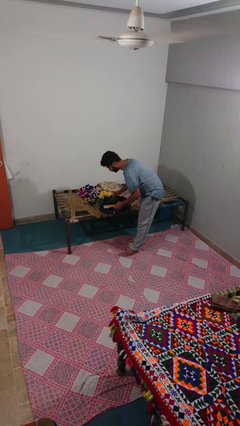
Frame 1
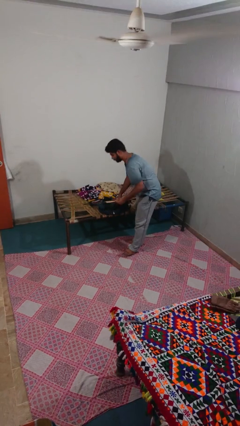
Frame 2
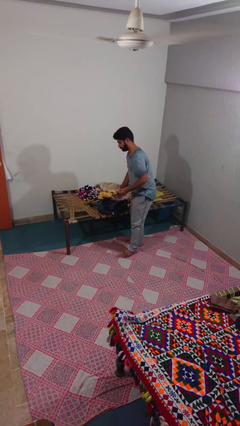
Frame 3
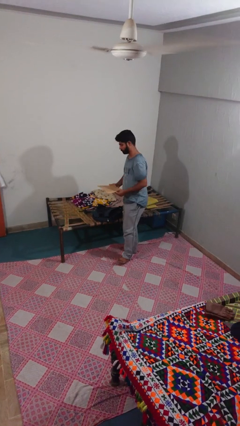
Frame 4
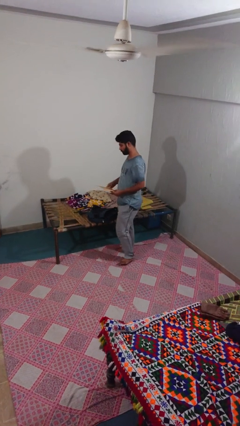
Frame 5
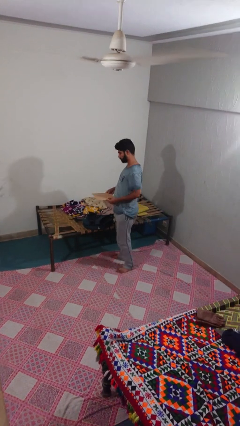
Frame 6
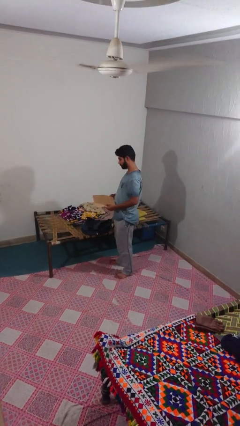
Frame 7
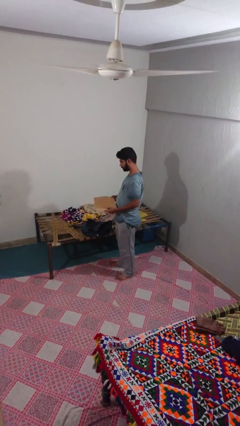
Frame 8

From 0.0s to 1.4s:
person takes object from backpack

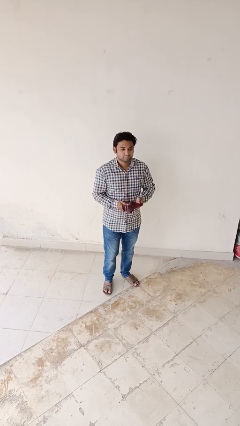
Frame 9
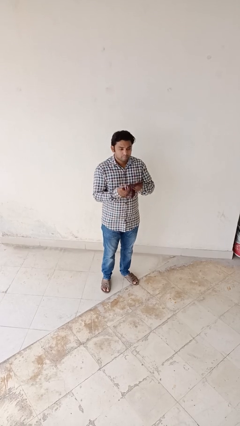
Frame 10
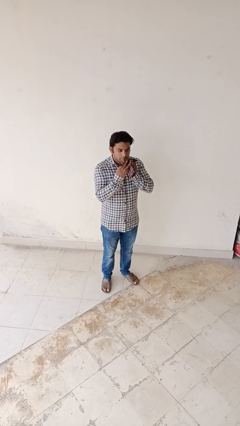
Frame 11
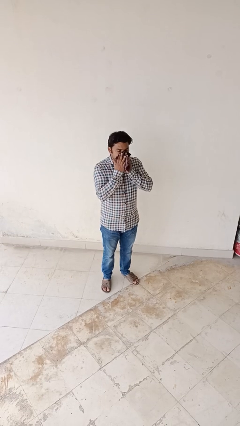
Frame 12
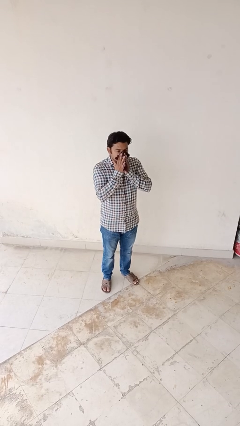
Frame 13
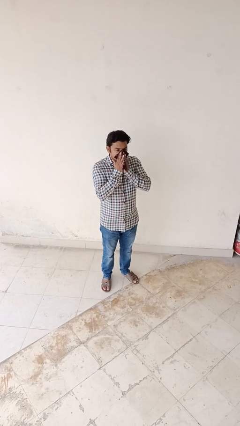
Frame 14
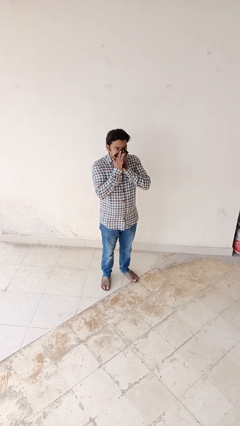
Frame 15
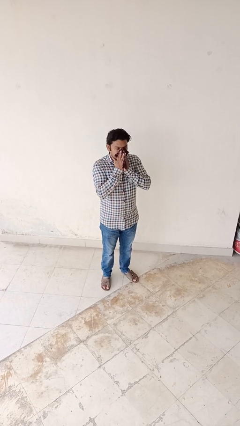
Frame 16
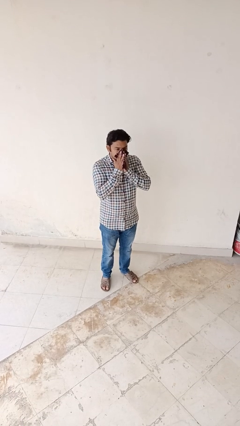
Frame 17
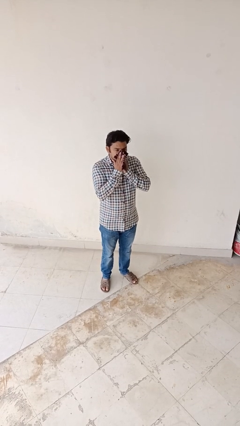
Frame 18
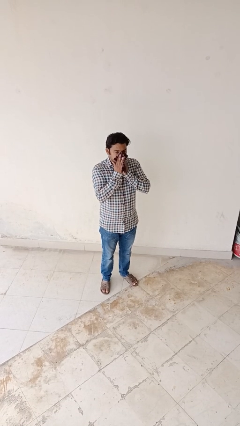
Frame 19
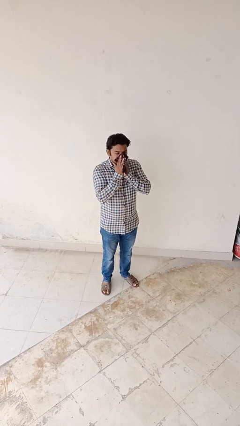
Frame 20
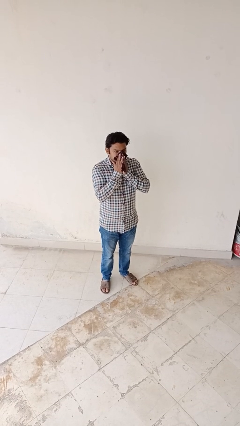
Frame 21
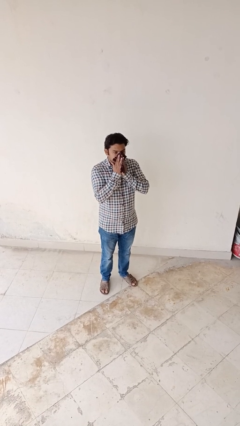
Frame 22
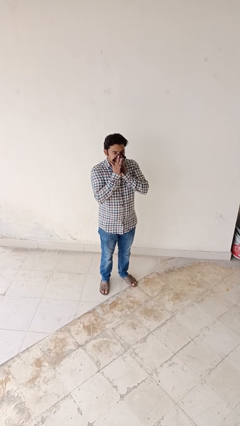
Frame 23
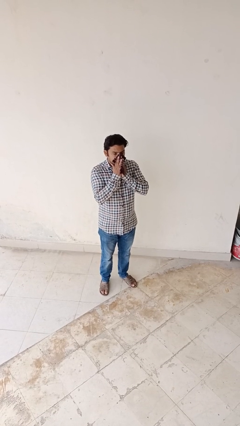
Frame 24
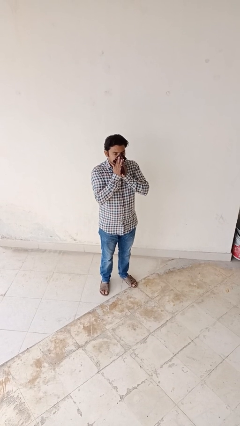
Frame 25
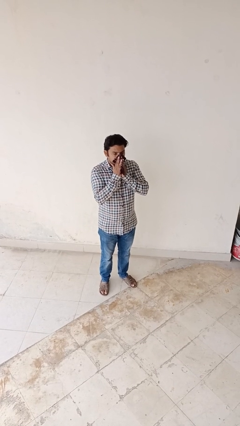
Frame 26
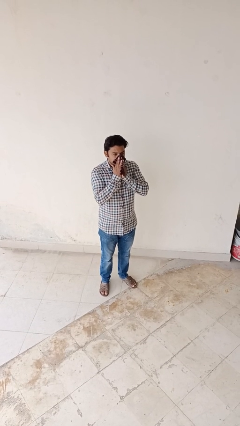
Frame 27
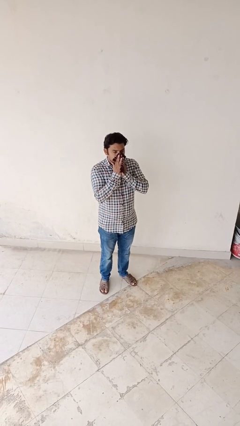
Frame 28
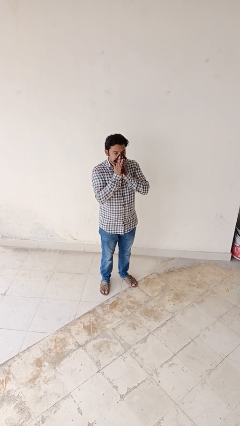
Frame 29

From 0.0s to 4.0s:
person blows nose

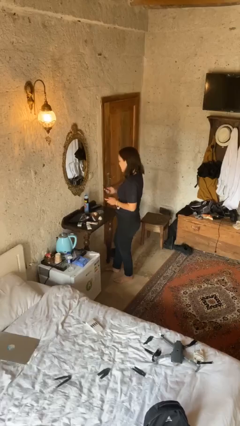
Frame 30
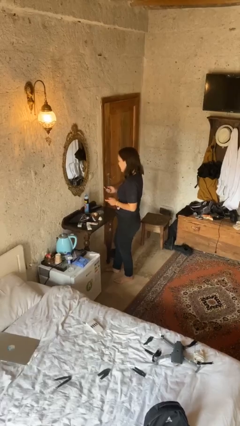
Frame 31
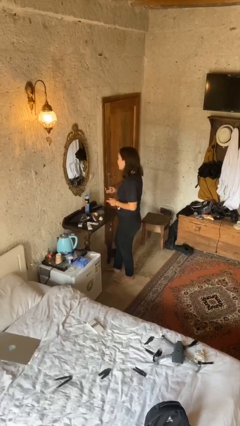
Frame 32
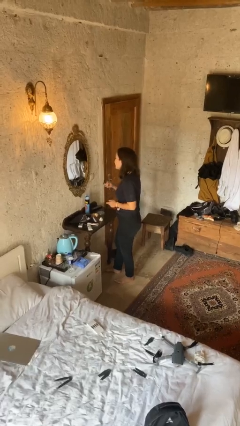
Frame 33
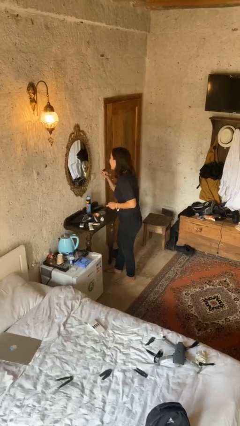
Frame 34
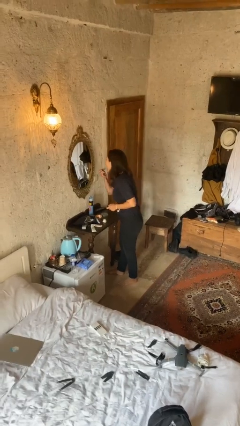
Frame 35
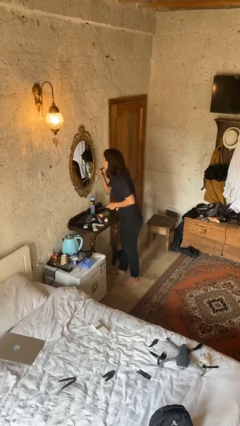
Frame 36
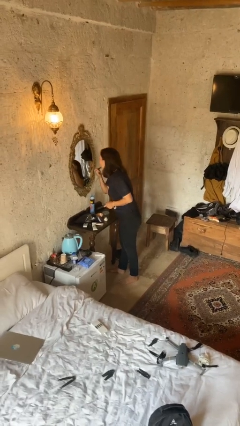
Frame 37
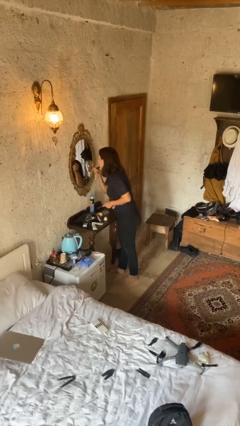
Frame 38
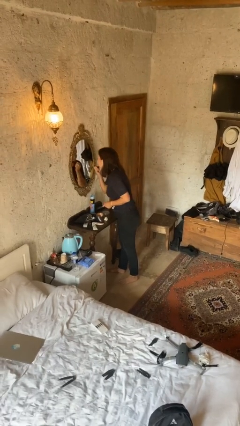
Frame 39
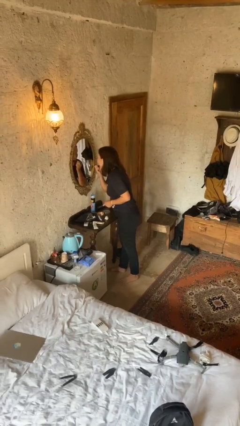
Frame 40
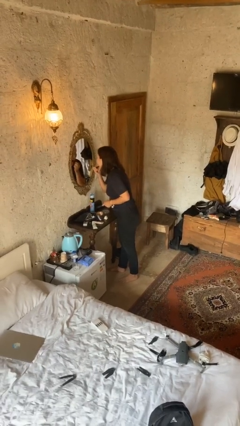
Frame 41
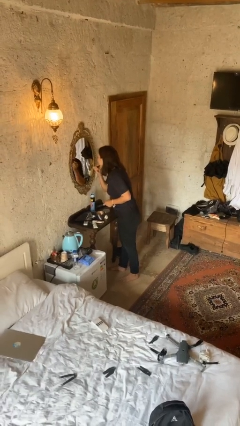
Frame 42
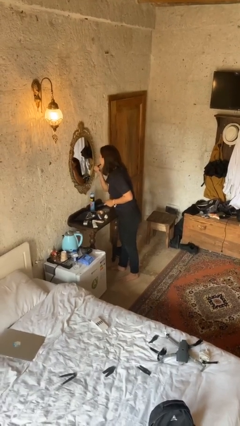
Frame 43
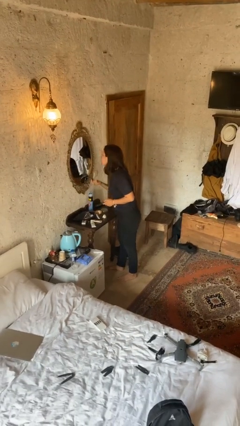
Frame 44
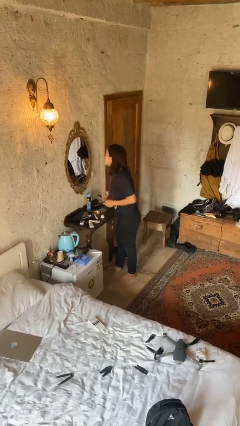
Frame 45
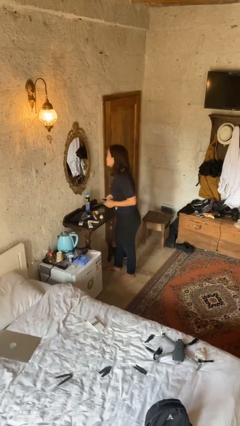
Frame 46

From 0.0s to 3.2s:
person applies lip makeup

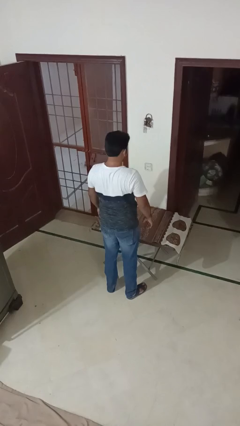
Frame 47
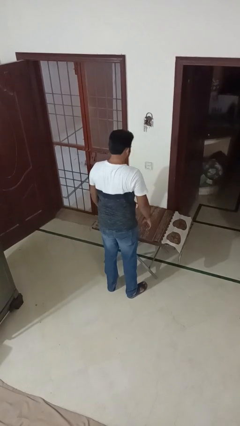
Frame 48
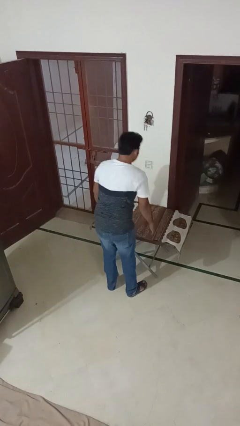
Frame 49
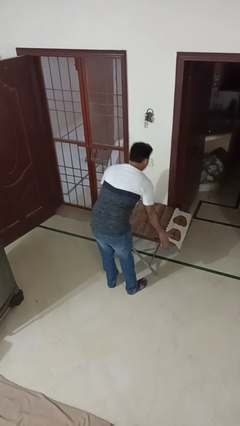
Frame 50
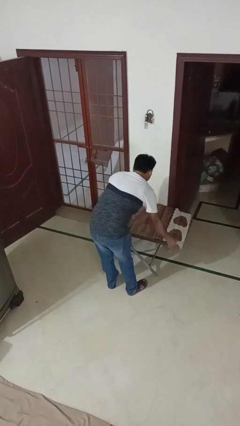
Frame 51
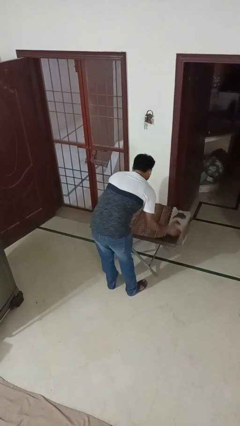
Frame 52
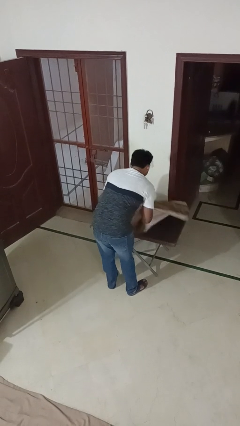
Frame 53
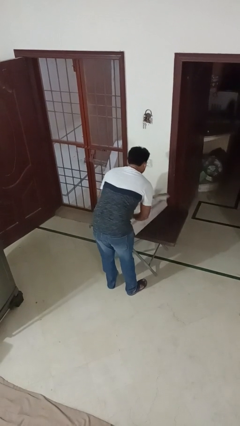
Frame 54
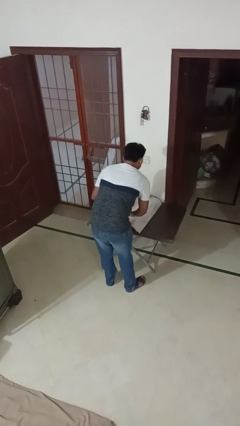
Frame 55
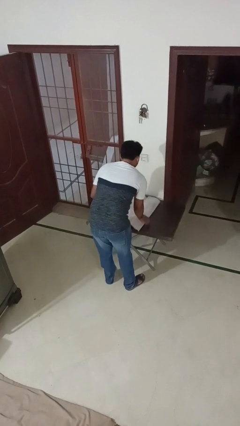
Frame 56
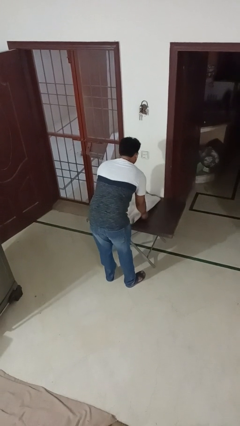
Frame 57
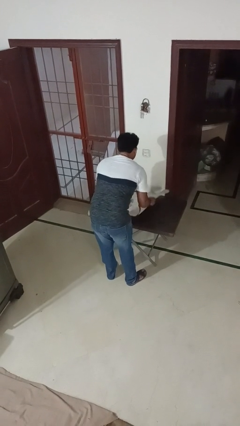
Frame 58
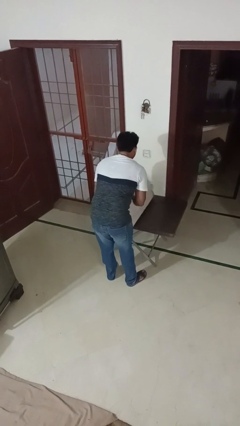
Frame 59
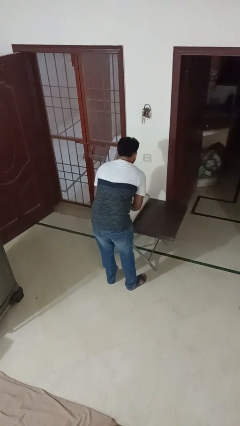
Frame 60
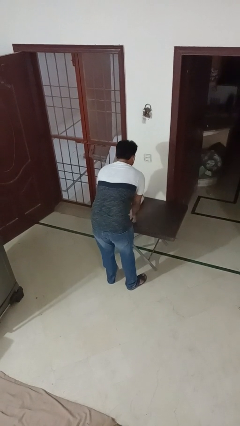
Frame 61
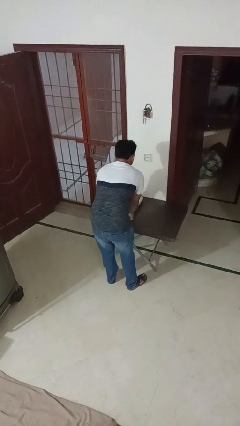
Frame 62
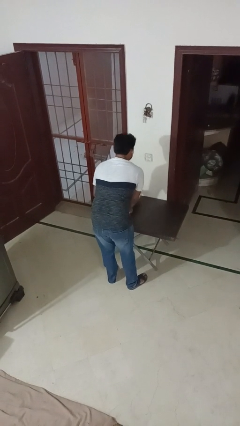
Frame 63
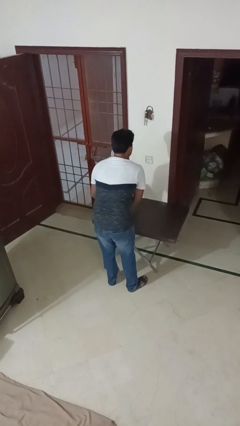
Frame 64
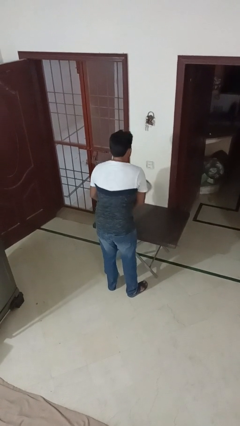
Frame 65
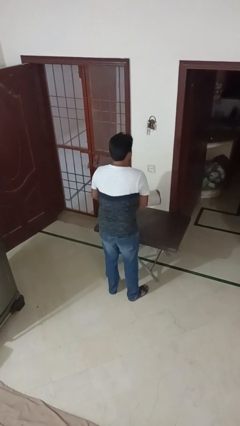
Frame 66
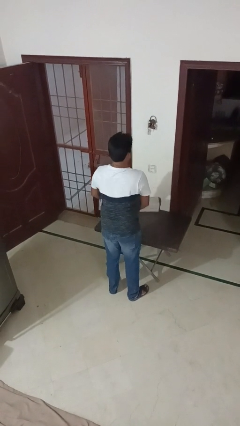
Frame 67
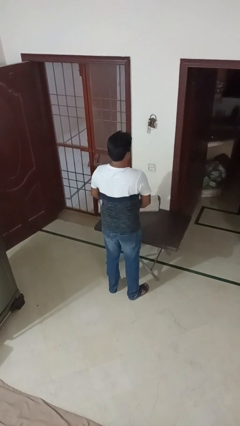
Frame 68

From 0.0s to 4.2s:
person folds tablecloth

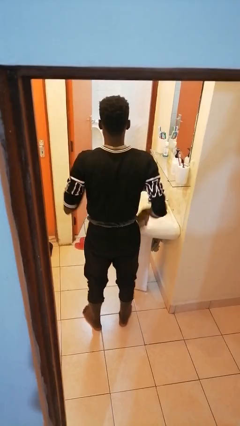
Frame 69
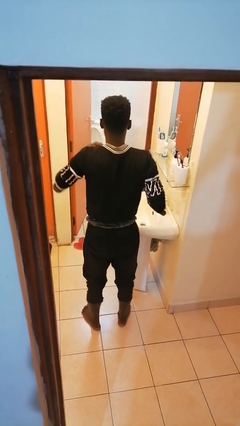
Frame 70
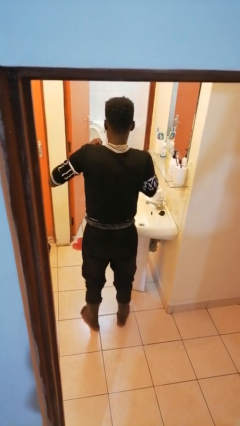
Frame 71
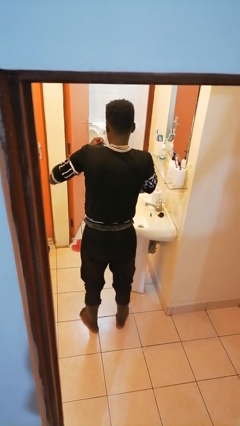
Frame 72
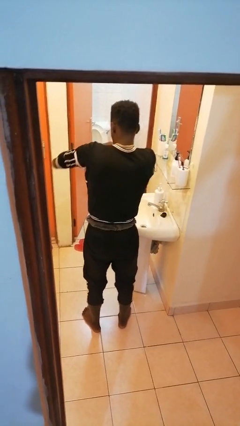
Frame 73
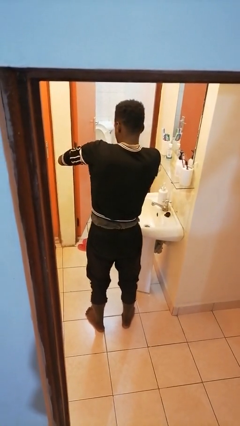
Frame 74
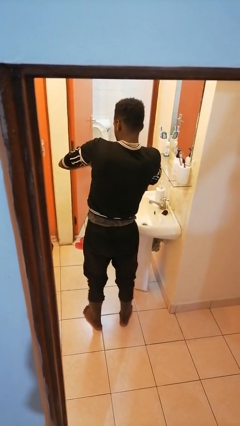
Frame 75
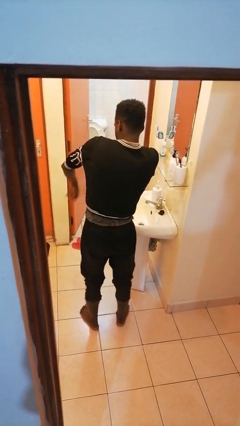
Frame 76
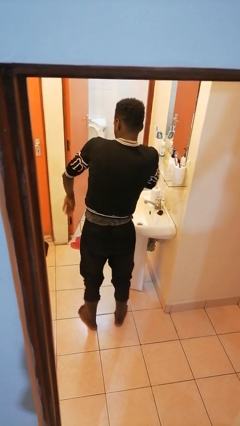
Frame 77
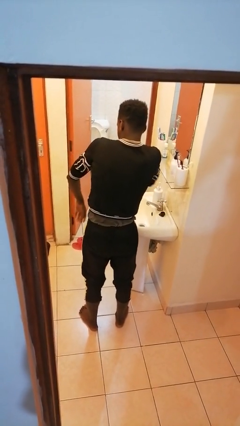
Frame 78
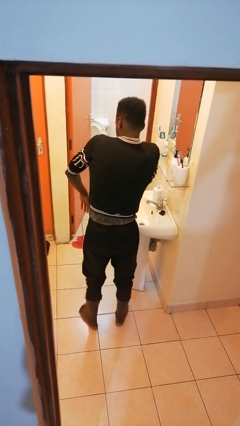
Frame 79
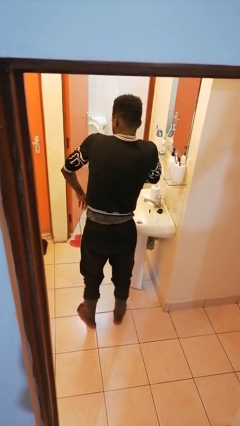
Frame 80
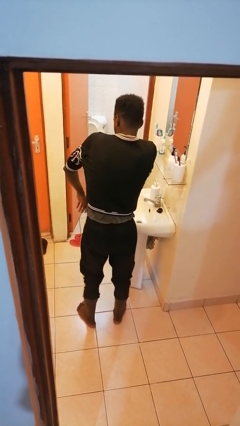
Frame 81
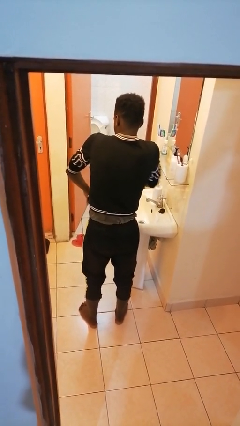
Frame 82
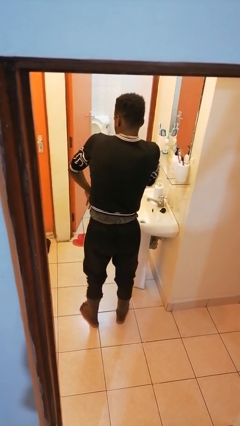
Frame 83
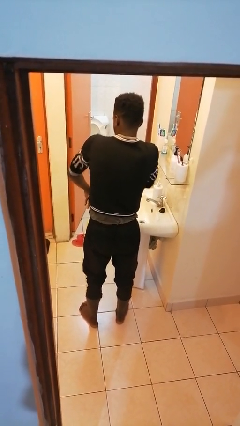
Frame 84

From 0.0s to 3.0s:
person applies deodorant

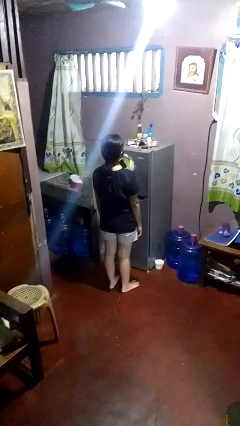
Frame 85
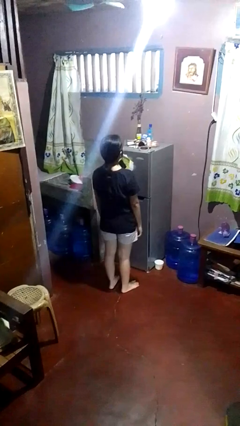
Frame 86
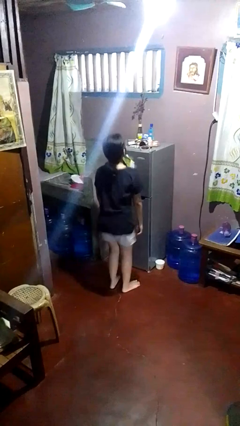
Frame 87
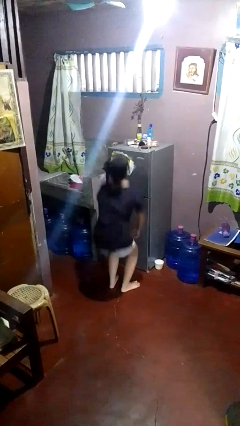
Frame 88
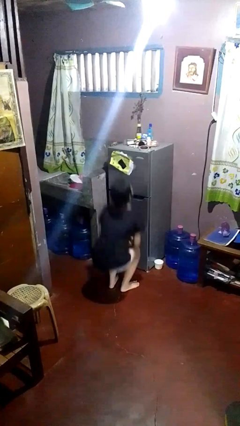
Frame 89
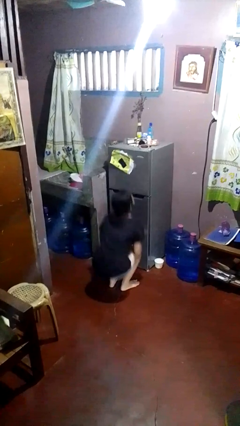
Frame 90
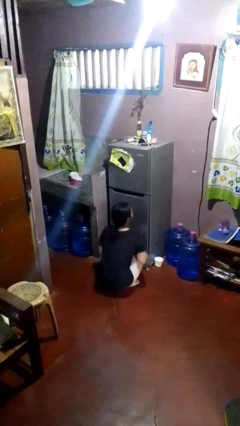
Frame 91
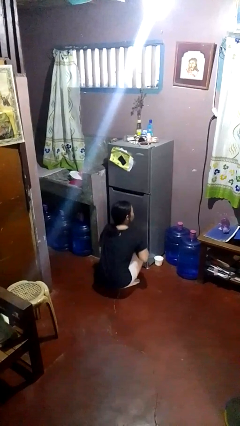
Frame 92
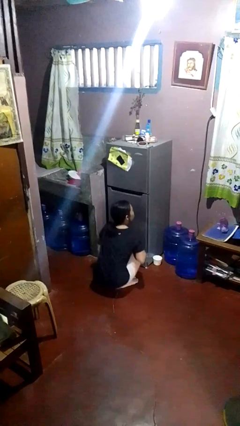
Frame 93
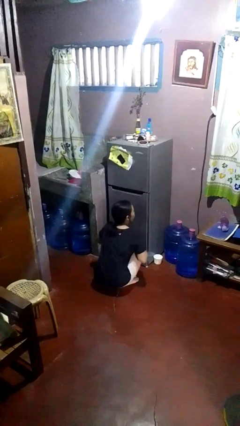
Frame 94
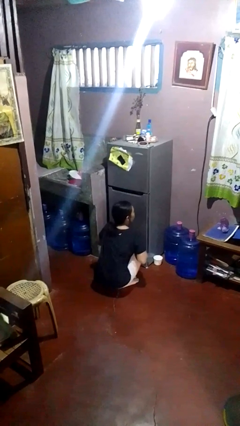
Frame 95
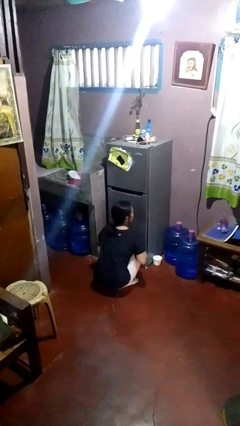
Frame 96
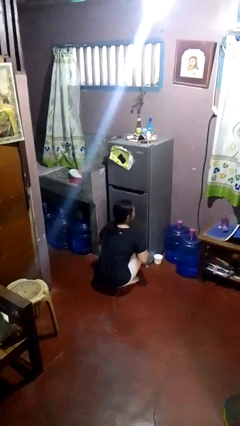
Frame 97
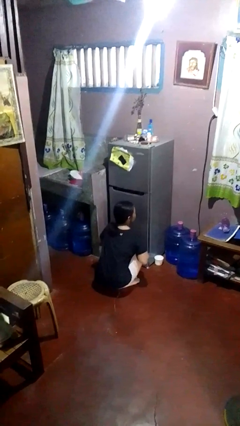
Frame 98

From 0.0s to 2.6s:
person squats
